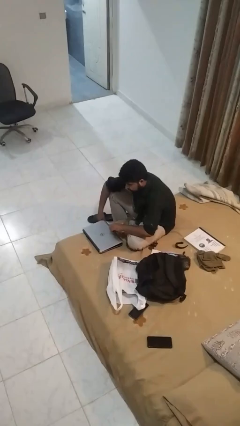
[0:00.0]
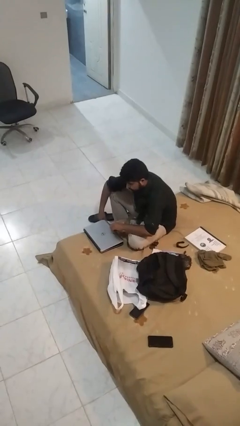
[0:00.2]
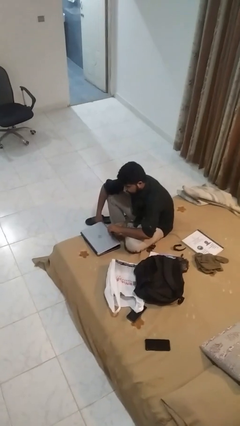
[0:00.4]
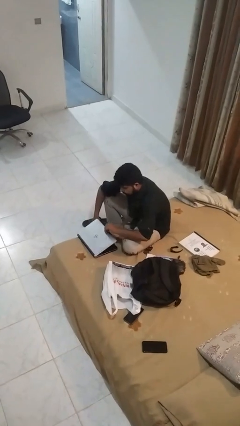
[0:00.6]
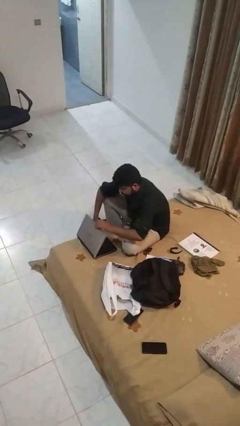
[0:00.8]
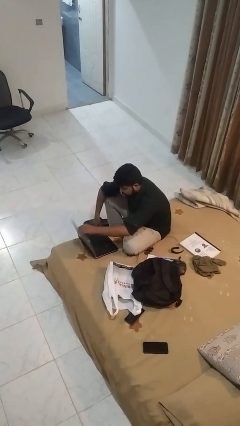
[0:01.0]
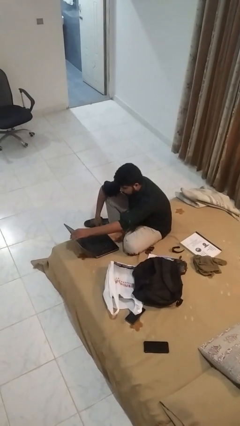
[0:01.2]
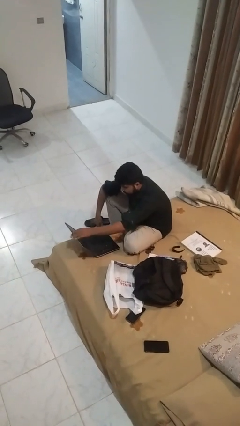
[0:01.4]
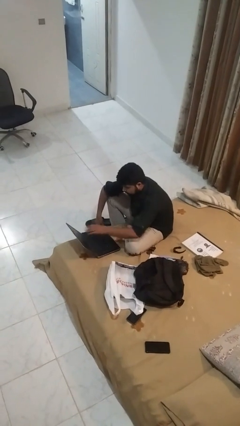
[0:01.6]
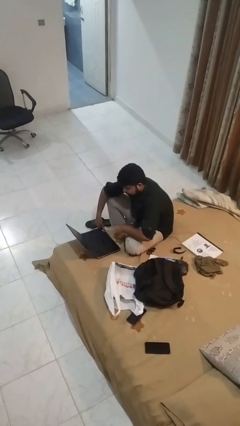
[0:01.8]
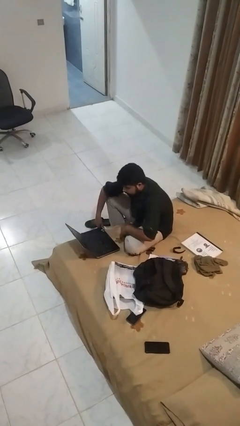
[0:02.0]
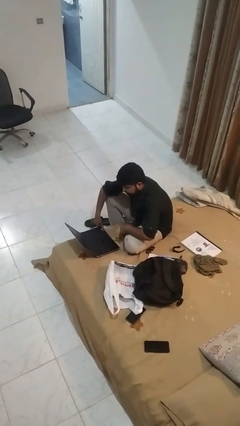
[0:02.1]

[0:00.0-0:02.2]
person opens laptop

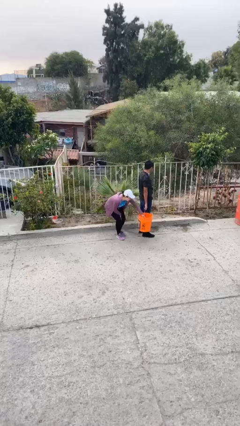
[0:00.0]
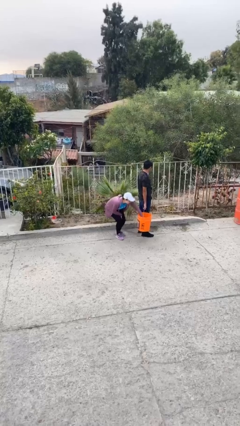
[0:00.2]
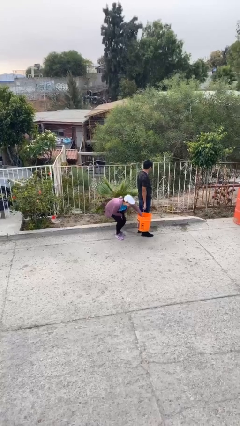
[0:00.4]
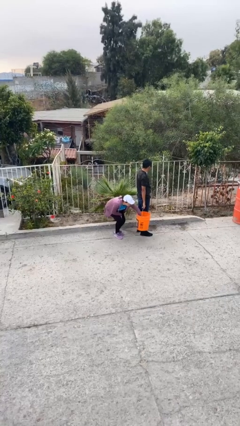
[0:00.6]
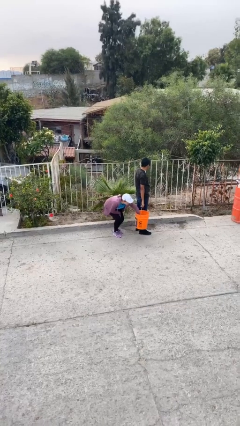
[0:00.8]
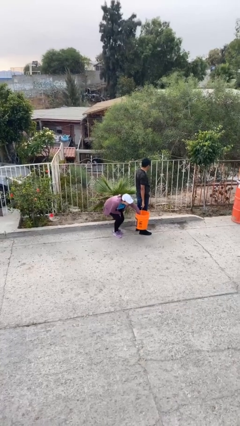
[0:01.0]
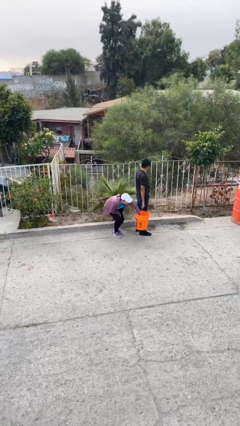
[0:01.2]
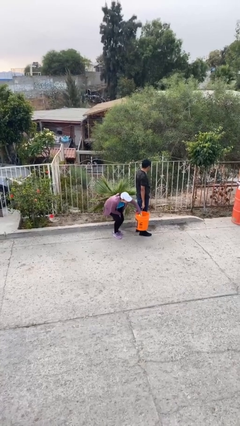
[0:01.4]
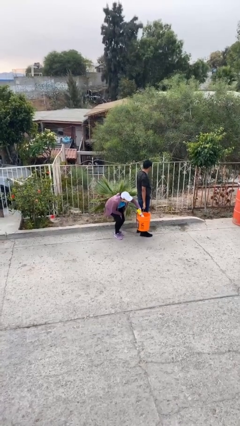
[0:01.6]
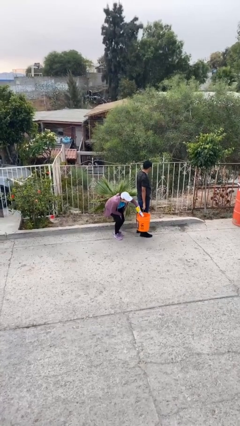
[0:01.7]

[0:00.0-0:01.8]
person steals object from person

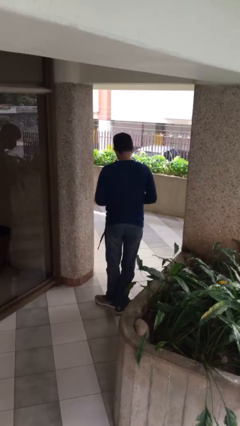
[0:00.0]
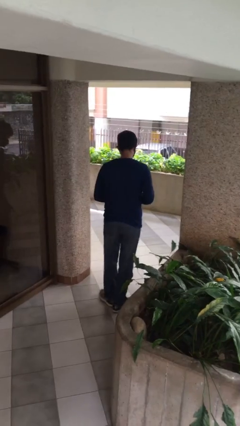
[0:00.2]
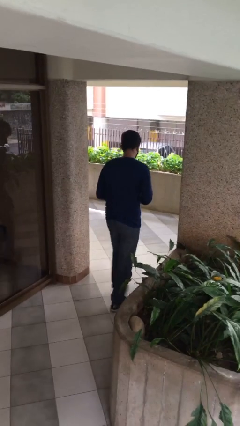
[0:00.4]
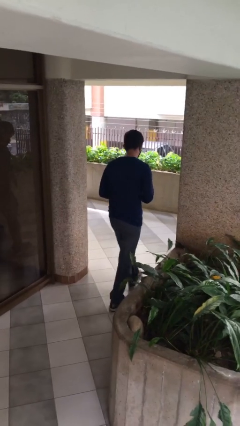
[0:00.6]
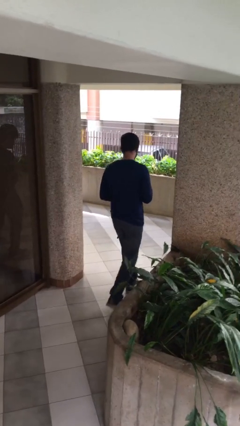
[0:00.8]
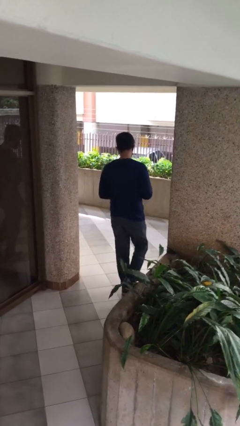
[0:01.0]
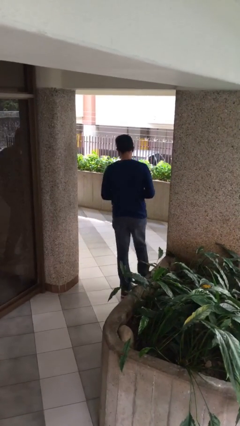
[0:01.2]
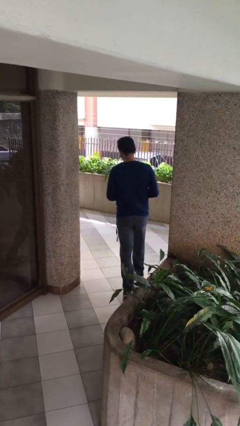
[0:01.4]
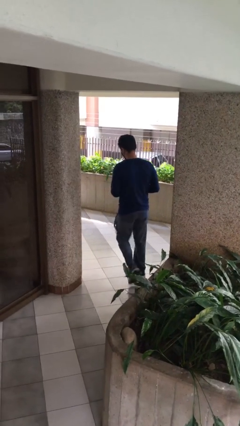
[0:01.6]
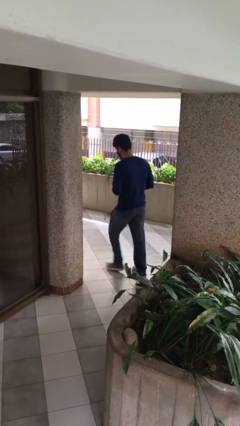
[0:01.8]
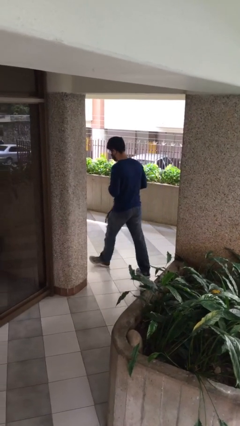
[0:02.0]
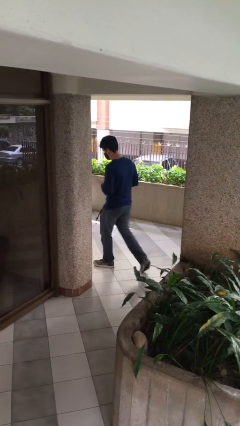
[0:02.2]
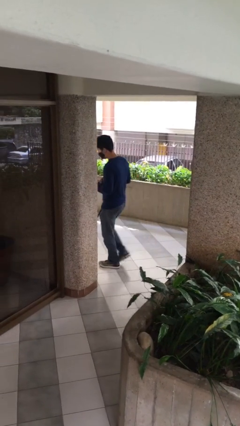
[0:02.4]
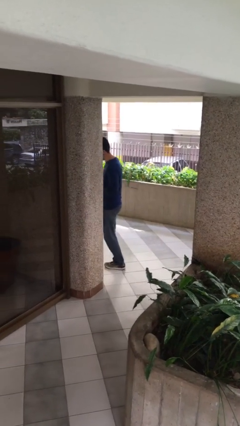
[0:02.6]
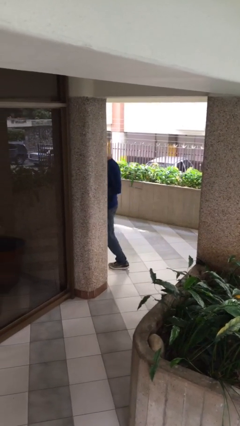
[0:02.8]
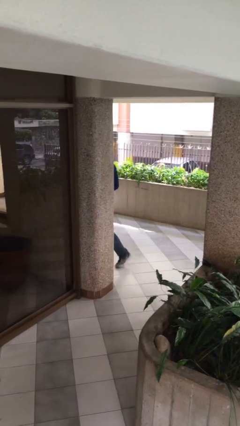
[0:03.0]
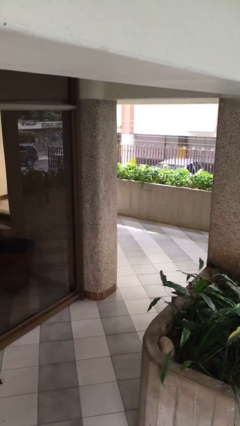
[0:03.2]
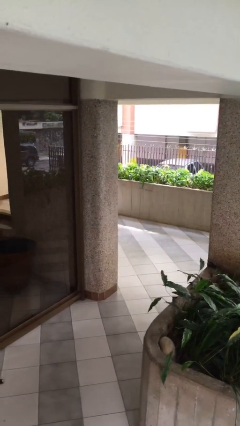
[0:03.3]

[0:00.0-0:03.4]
person exits scene through structure

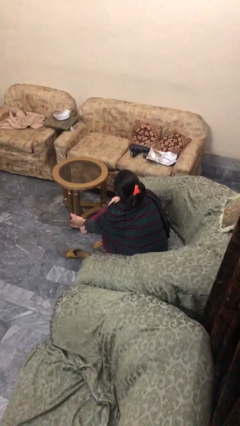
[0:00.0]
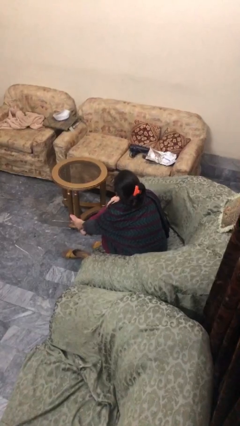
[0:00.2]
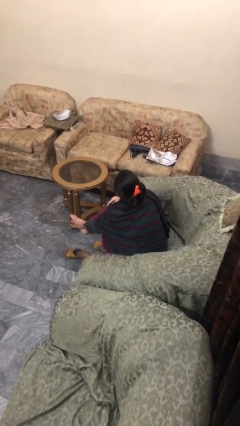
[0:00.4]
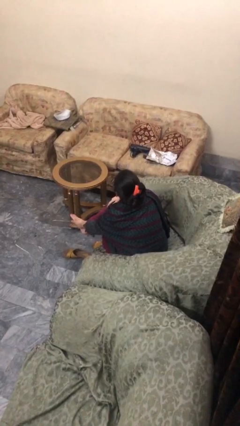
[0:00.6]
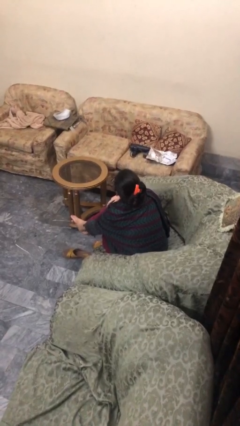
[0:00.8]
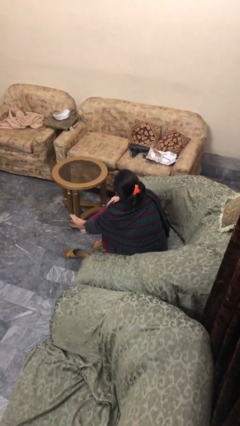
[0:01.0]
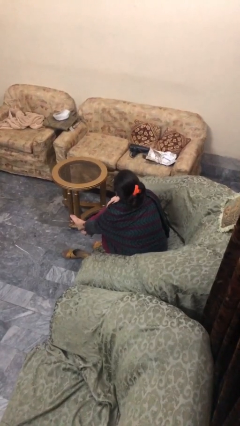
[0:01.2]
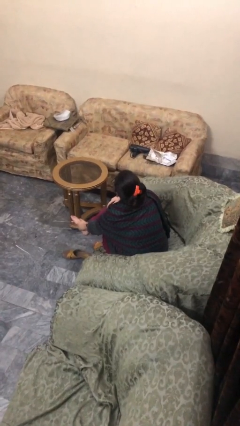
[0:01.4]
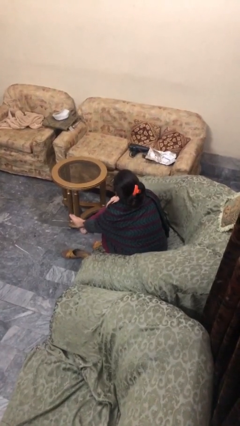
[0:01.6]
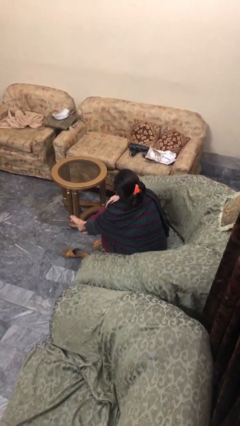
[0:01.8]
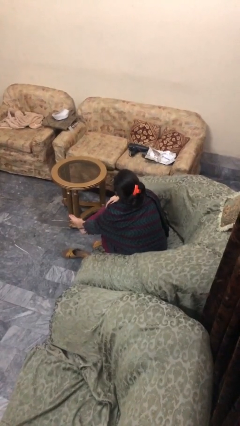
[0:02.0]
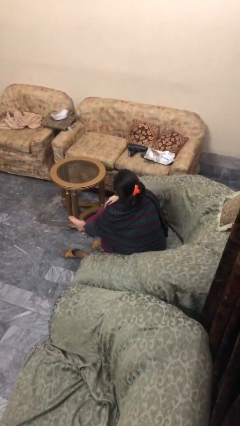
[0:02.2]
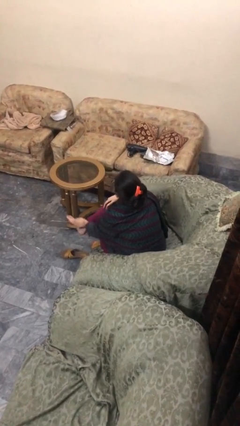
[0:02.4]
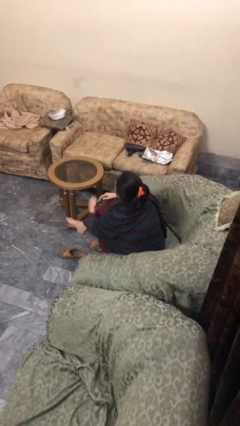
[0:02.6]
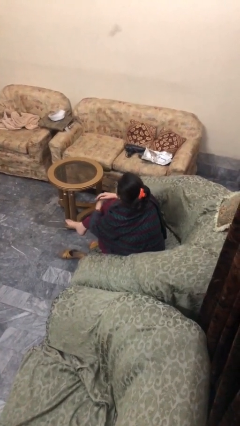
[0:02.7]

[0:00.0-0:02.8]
person rubs foot

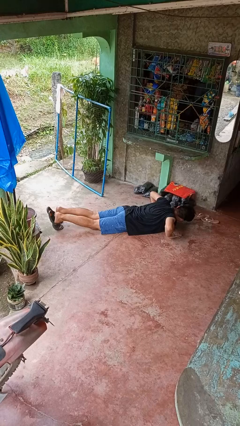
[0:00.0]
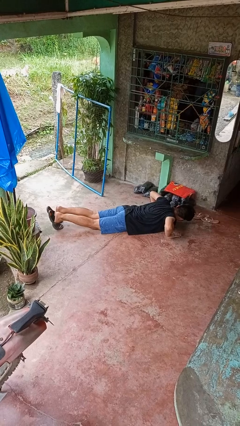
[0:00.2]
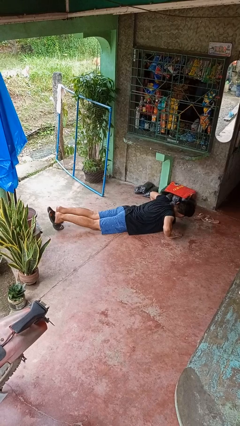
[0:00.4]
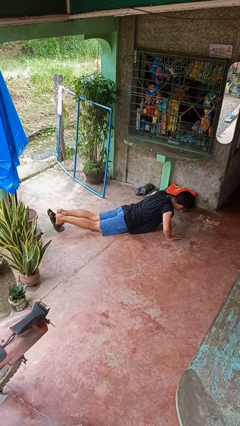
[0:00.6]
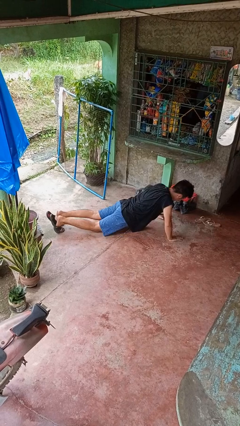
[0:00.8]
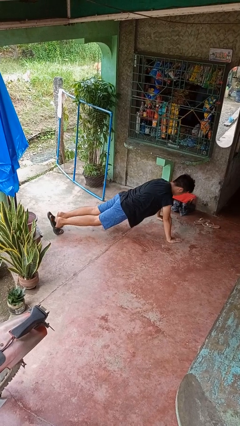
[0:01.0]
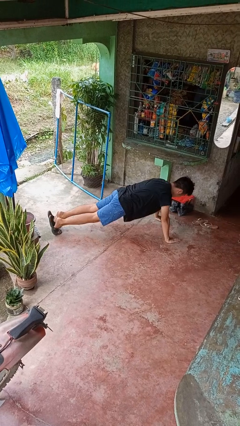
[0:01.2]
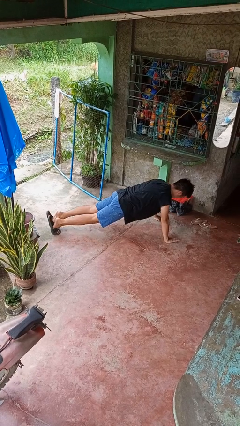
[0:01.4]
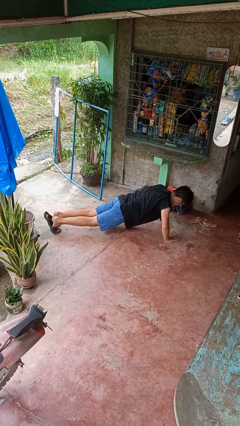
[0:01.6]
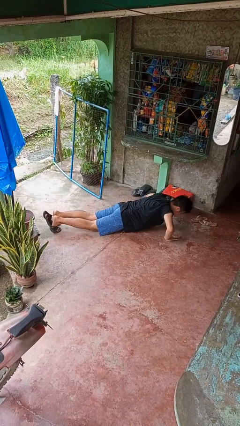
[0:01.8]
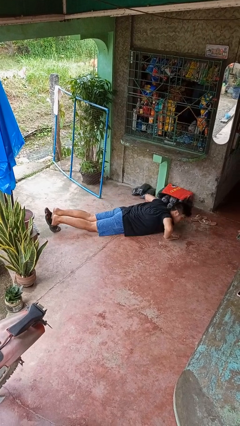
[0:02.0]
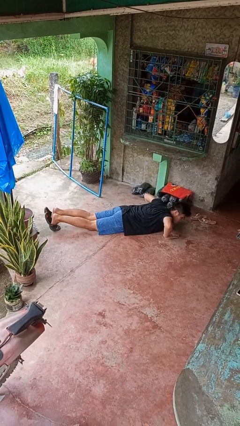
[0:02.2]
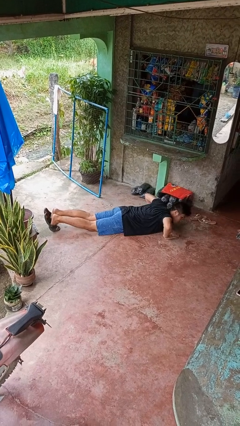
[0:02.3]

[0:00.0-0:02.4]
person exercises with pushup

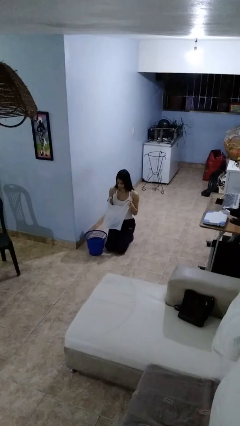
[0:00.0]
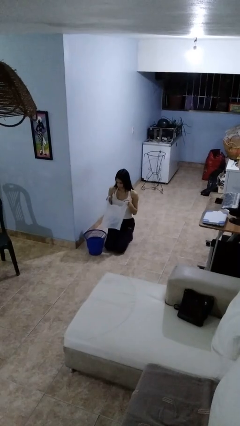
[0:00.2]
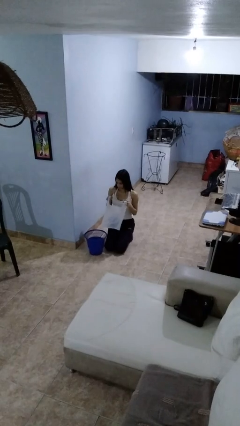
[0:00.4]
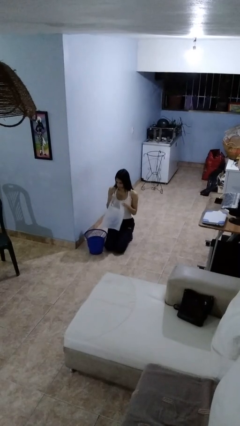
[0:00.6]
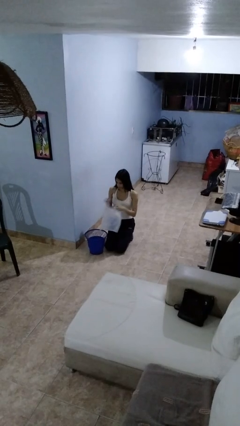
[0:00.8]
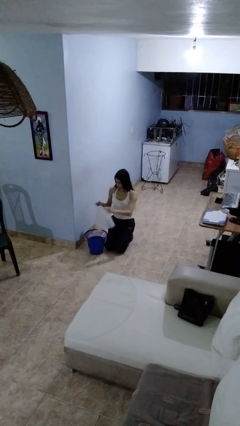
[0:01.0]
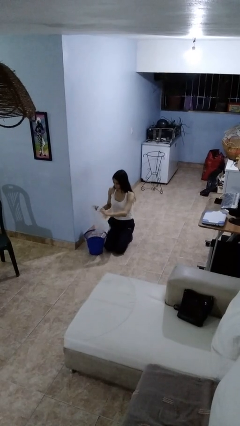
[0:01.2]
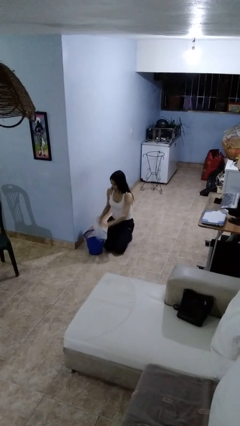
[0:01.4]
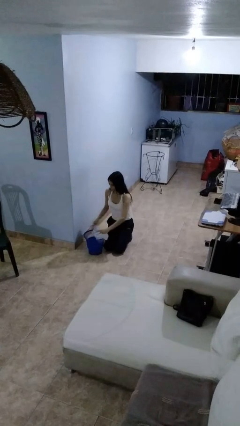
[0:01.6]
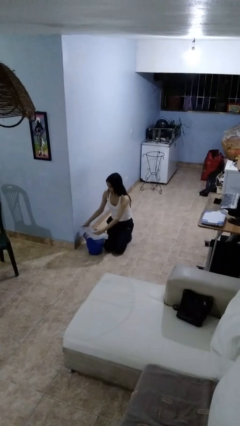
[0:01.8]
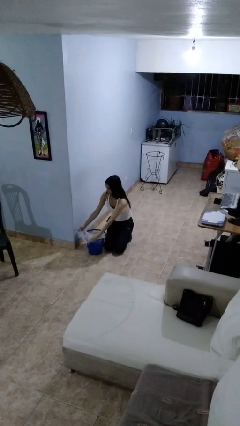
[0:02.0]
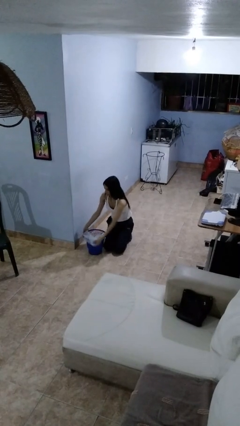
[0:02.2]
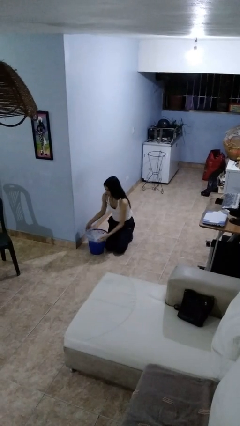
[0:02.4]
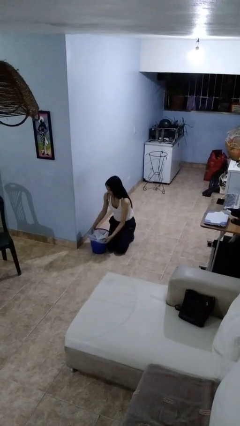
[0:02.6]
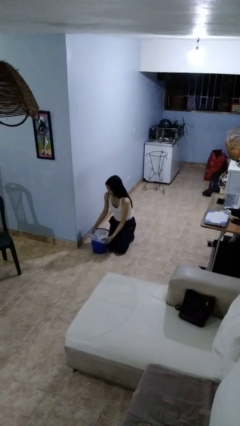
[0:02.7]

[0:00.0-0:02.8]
person inserts trashbag into trashcan

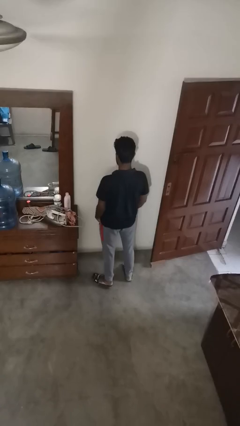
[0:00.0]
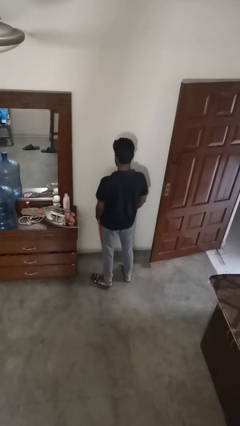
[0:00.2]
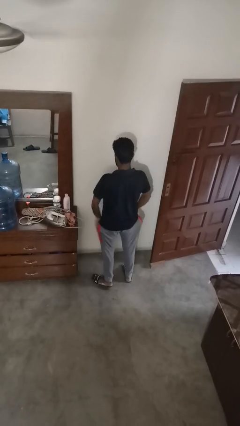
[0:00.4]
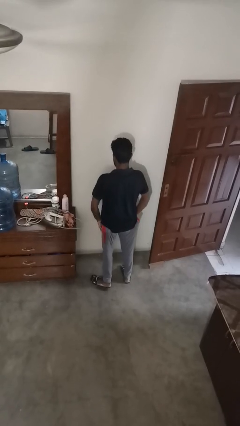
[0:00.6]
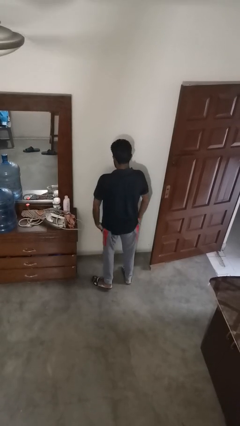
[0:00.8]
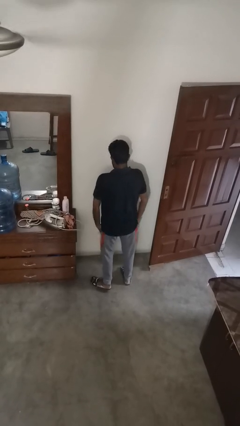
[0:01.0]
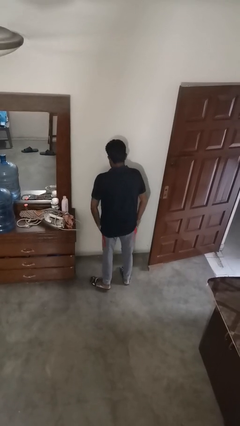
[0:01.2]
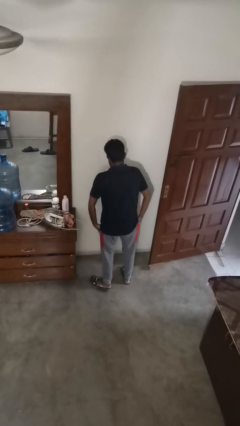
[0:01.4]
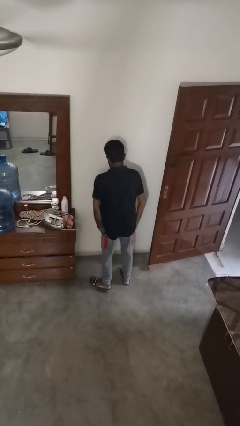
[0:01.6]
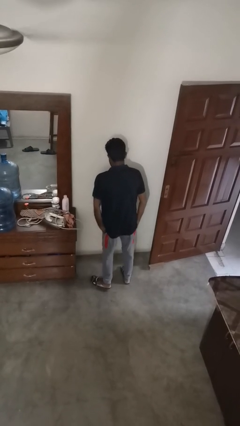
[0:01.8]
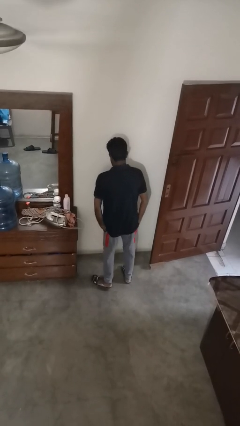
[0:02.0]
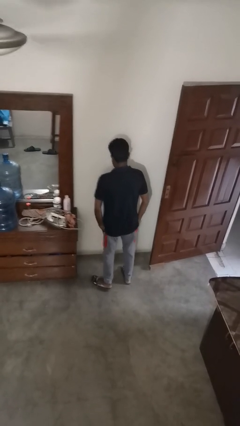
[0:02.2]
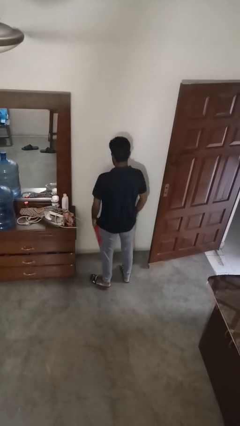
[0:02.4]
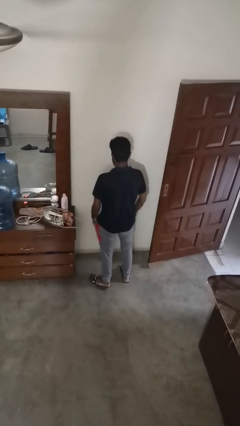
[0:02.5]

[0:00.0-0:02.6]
person puts hands in back pockets
